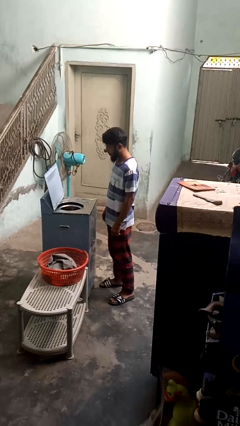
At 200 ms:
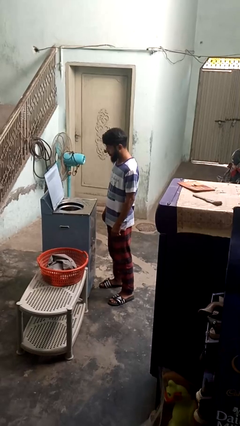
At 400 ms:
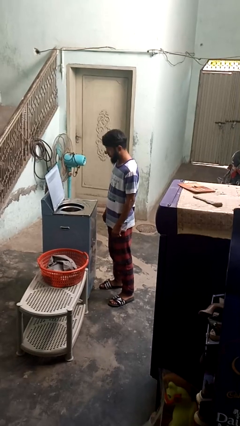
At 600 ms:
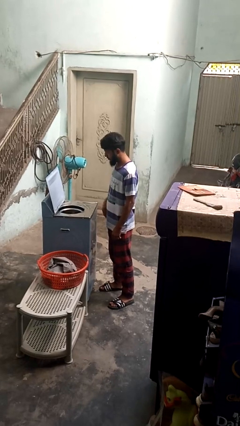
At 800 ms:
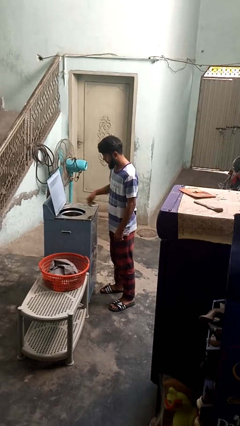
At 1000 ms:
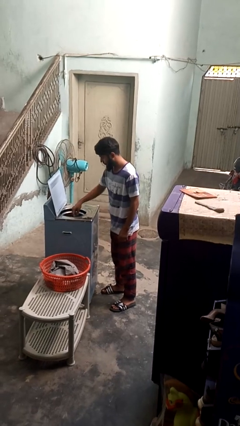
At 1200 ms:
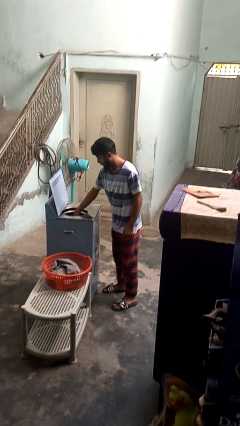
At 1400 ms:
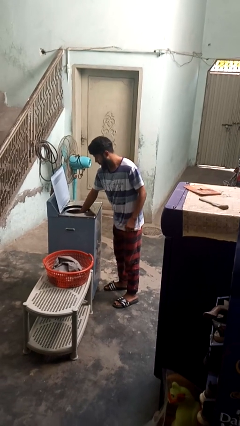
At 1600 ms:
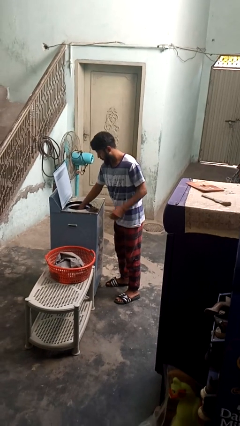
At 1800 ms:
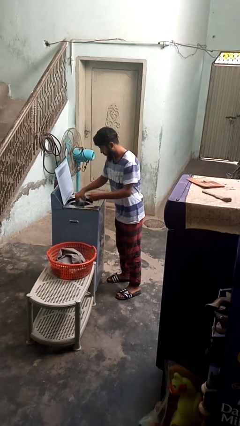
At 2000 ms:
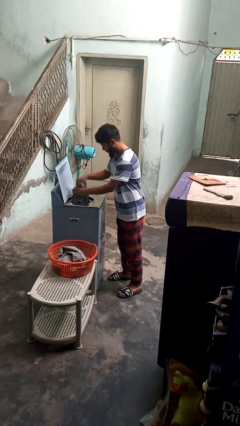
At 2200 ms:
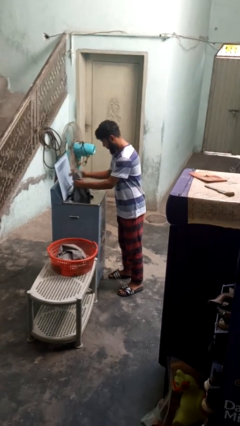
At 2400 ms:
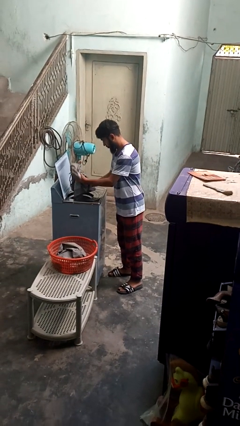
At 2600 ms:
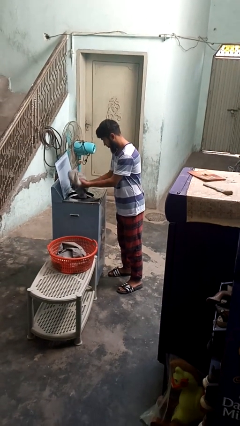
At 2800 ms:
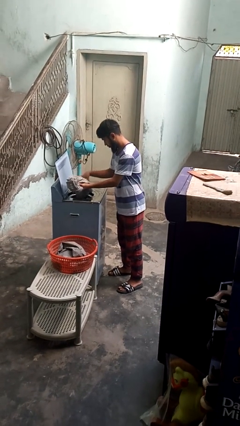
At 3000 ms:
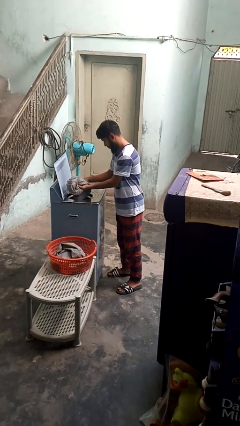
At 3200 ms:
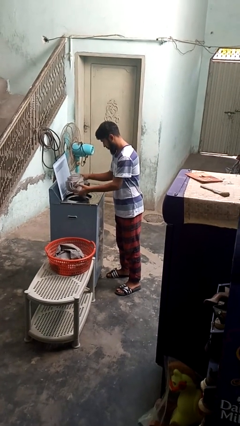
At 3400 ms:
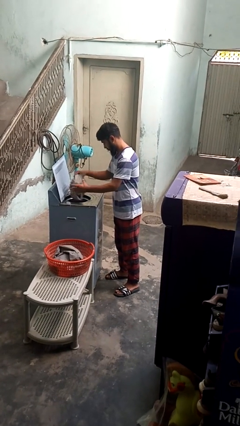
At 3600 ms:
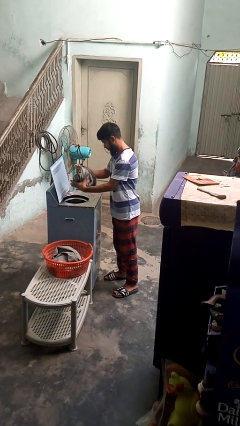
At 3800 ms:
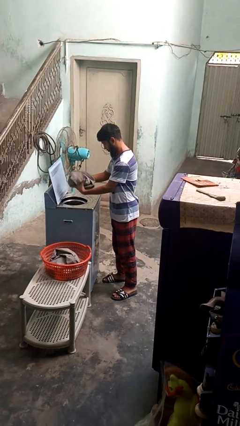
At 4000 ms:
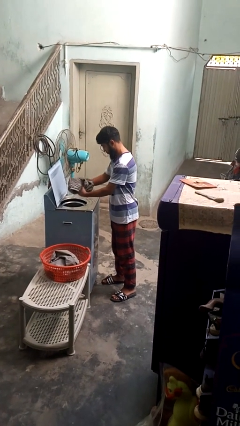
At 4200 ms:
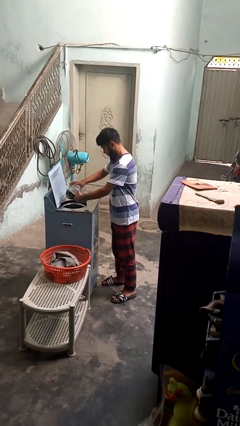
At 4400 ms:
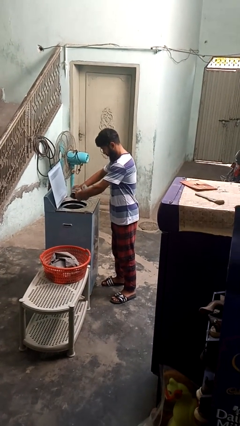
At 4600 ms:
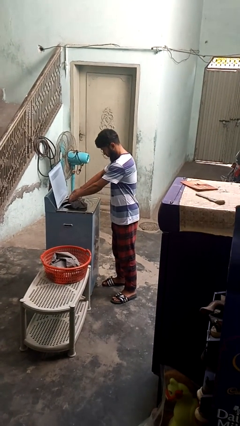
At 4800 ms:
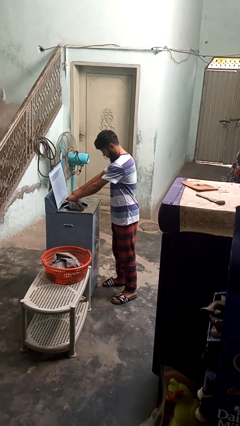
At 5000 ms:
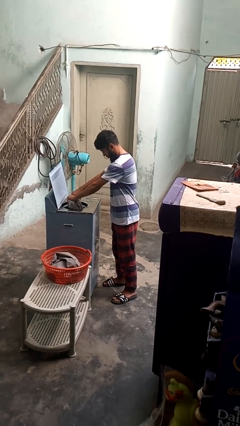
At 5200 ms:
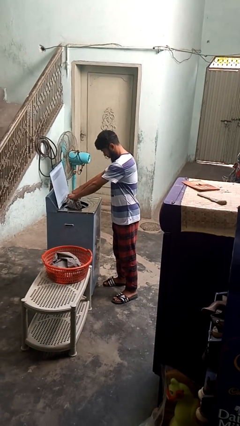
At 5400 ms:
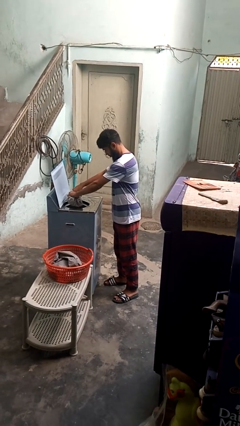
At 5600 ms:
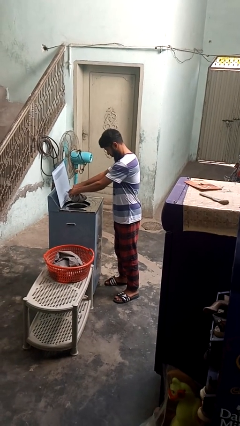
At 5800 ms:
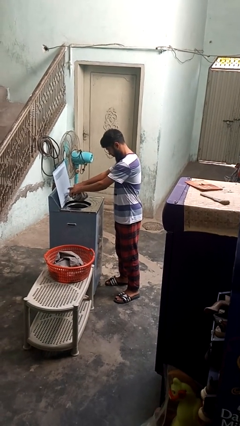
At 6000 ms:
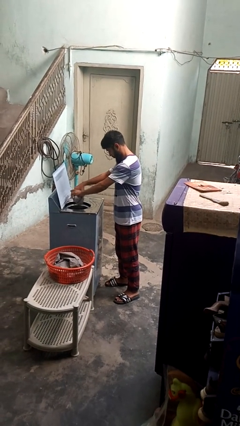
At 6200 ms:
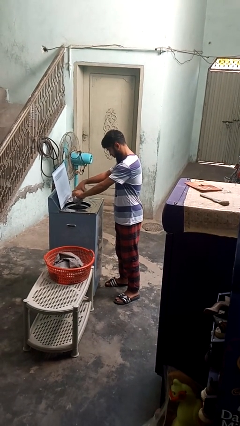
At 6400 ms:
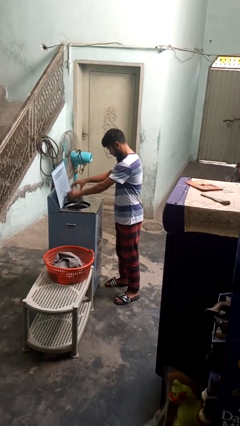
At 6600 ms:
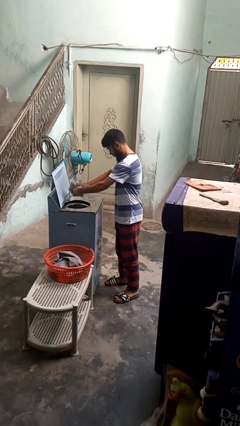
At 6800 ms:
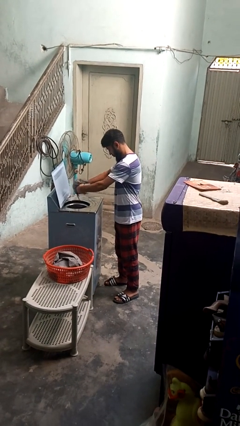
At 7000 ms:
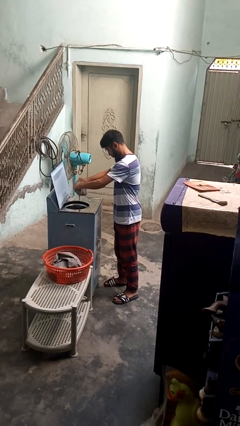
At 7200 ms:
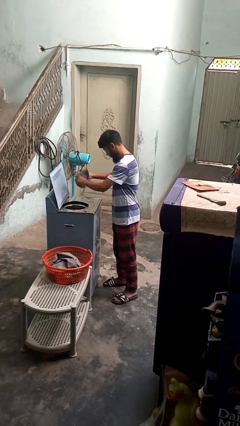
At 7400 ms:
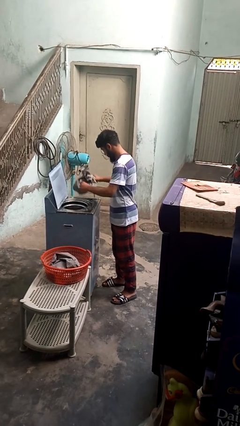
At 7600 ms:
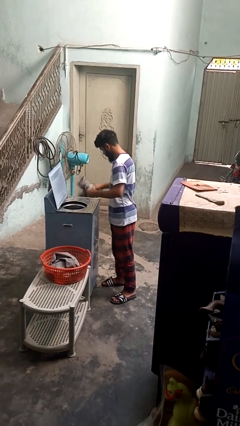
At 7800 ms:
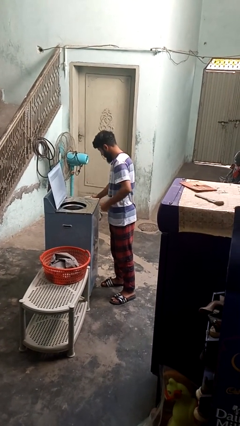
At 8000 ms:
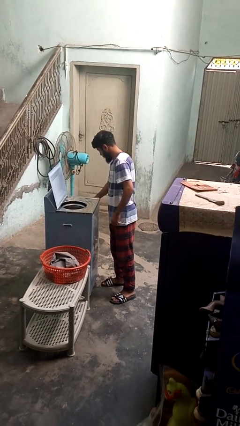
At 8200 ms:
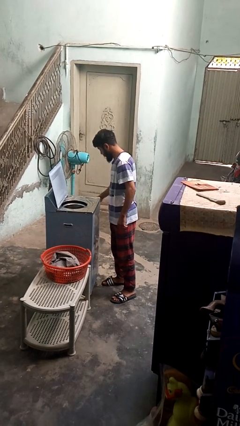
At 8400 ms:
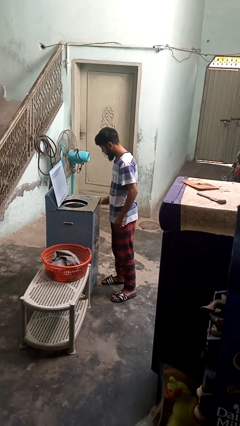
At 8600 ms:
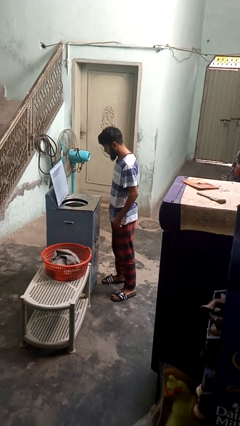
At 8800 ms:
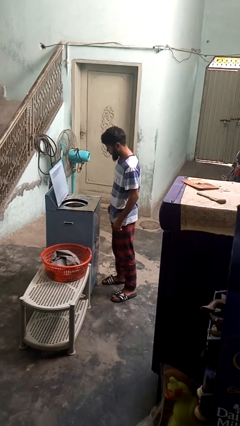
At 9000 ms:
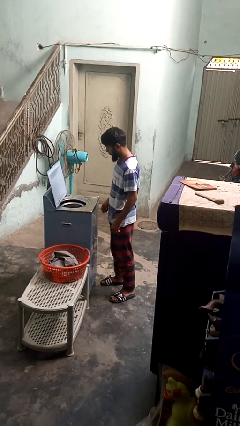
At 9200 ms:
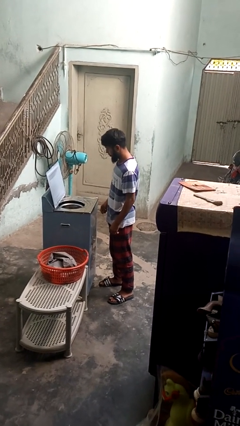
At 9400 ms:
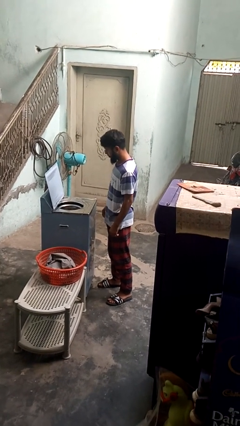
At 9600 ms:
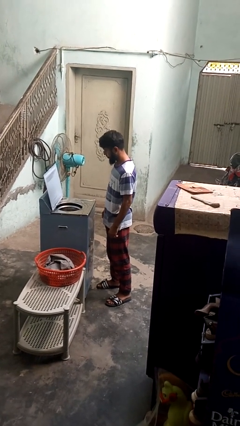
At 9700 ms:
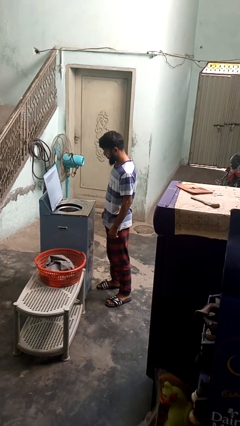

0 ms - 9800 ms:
person unloads clotheswasher

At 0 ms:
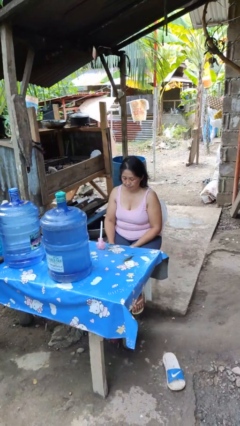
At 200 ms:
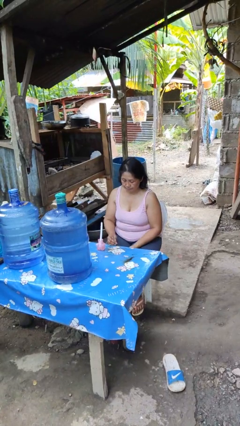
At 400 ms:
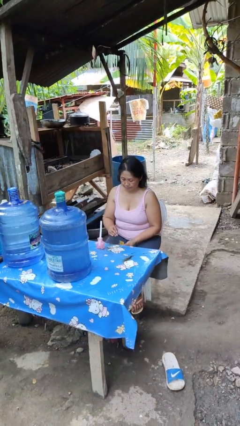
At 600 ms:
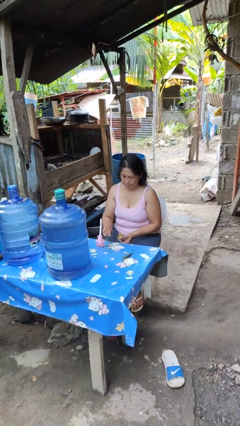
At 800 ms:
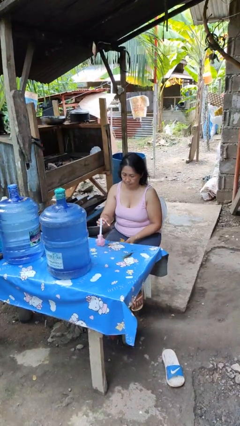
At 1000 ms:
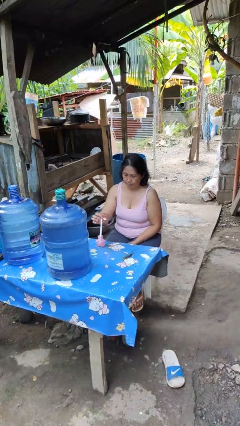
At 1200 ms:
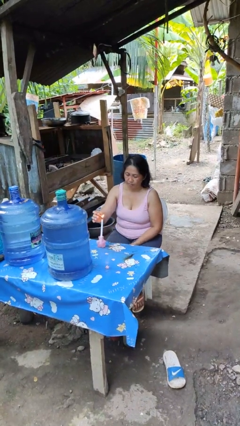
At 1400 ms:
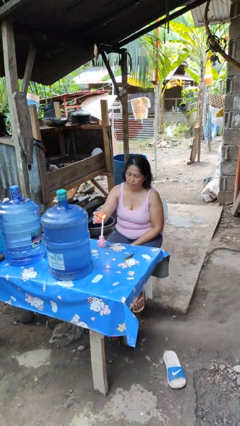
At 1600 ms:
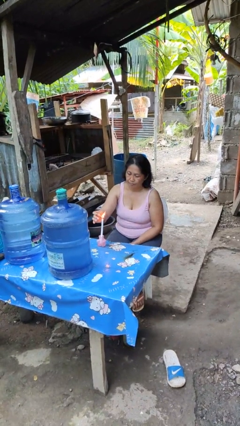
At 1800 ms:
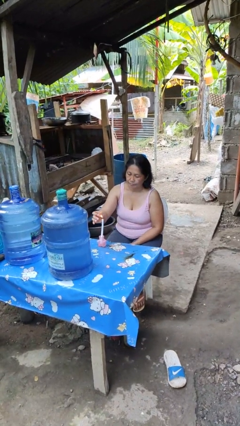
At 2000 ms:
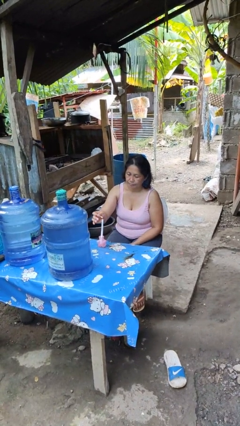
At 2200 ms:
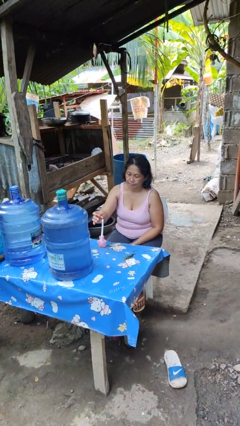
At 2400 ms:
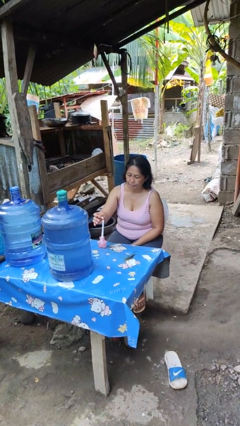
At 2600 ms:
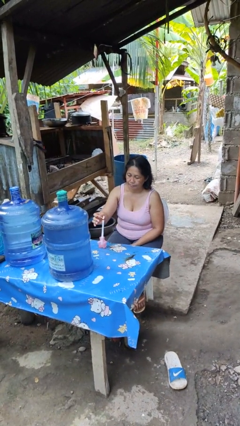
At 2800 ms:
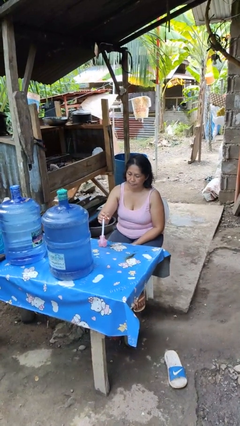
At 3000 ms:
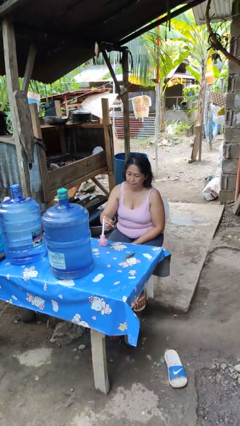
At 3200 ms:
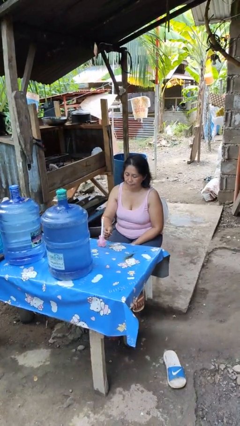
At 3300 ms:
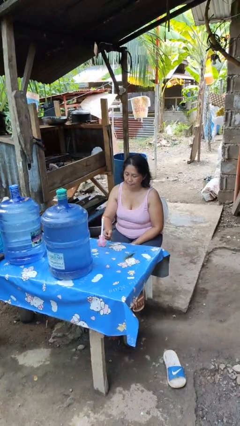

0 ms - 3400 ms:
person lights candle

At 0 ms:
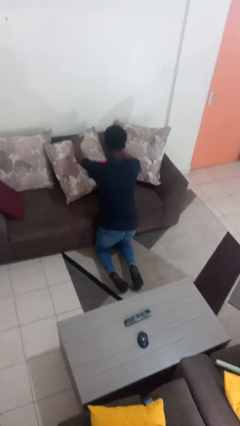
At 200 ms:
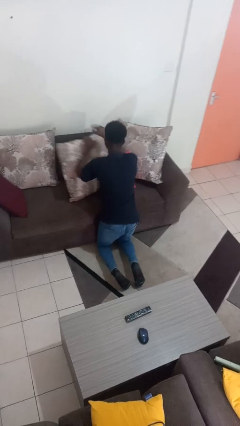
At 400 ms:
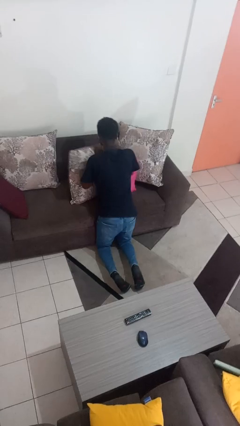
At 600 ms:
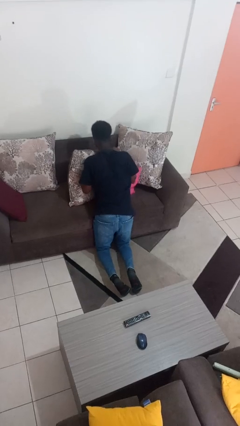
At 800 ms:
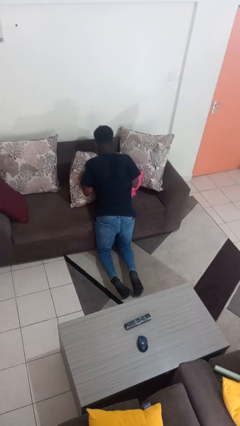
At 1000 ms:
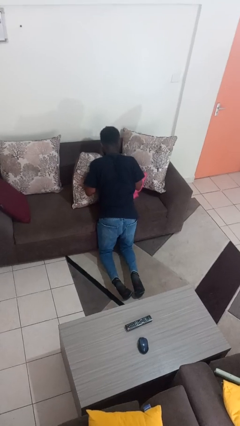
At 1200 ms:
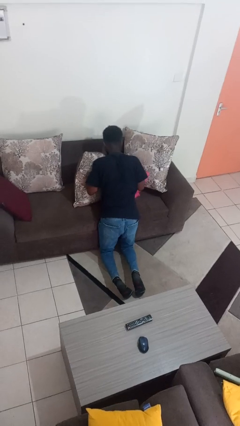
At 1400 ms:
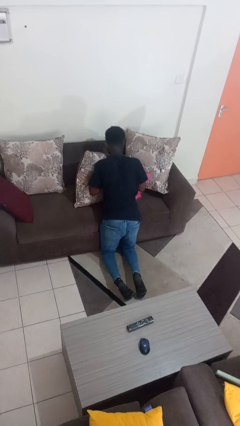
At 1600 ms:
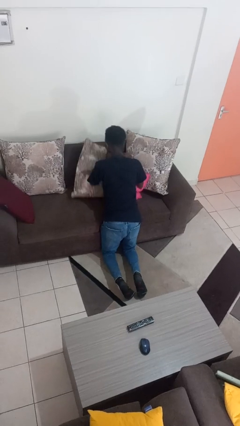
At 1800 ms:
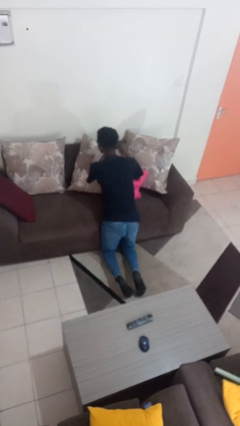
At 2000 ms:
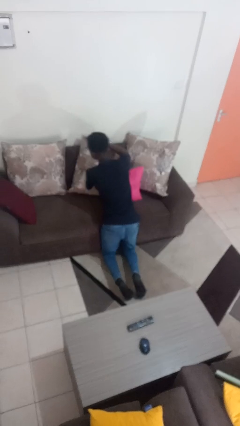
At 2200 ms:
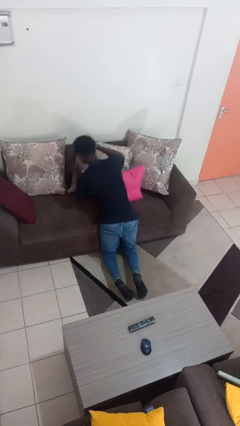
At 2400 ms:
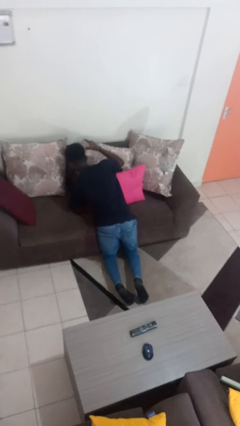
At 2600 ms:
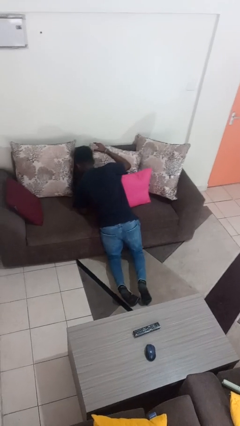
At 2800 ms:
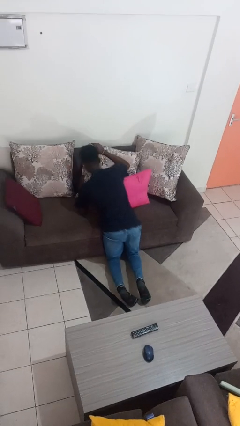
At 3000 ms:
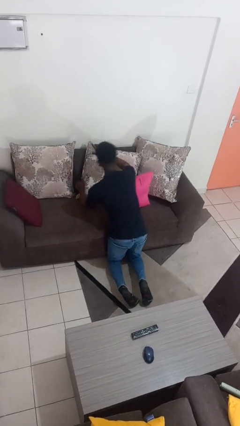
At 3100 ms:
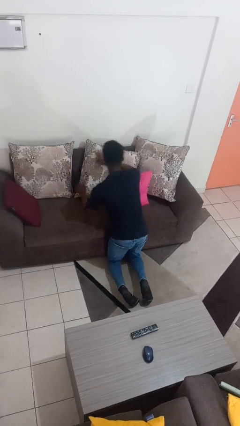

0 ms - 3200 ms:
person searches in couch

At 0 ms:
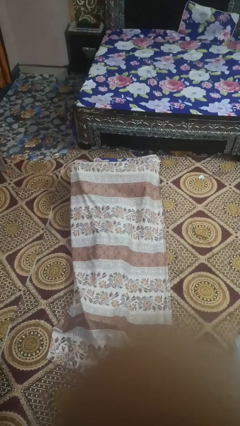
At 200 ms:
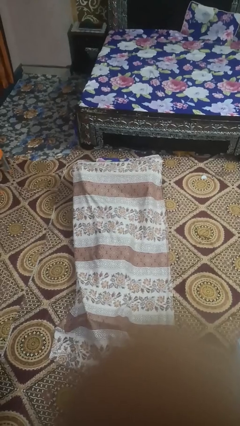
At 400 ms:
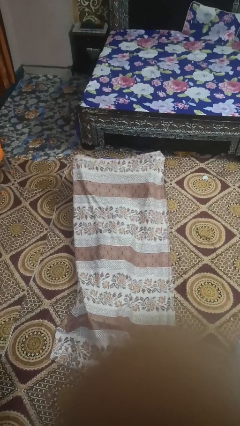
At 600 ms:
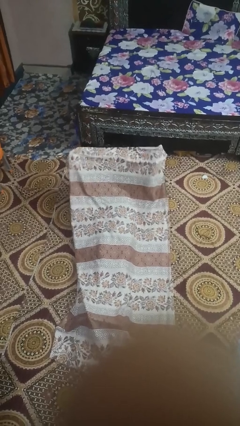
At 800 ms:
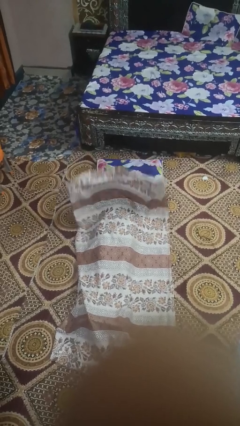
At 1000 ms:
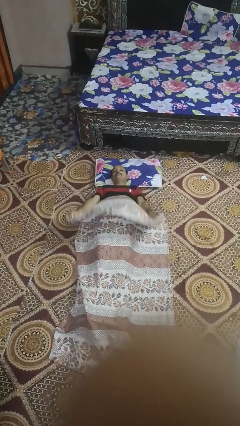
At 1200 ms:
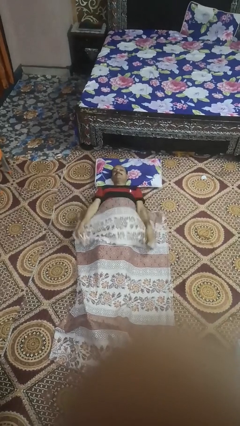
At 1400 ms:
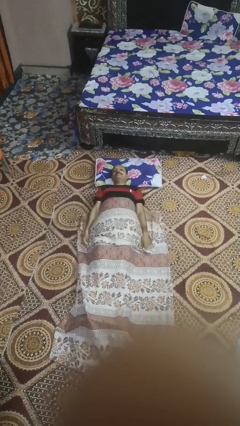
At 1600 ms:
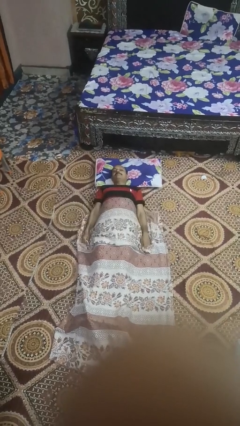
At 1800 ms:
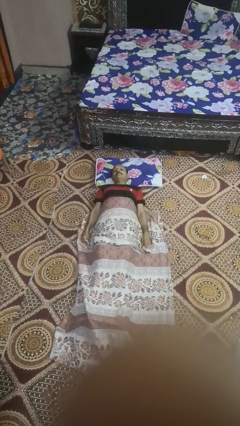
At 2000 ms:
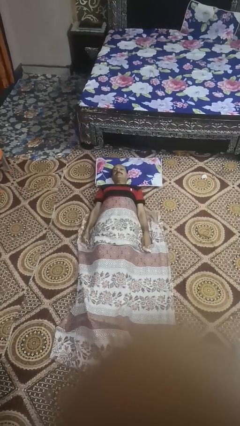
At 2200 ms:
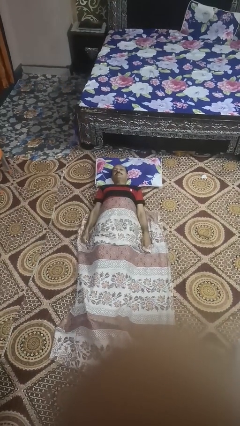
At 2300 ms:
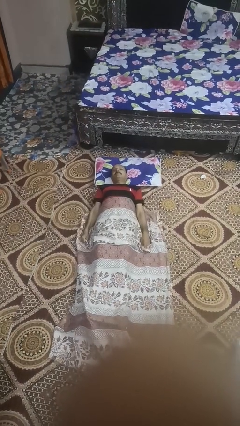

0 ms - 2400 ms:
person uncovers with bedsheets
